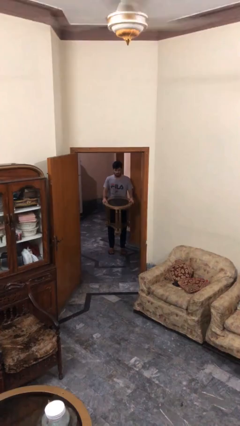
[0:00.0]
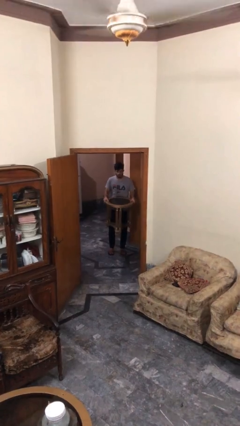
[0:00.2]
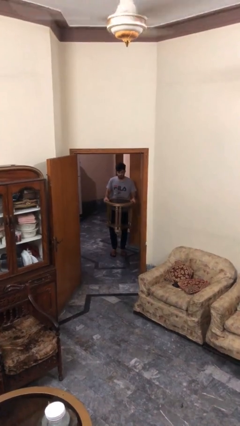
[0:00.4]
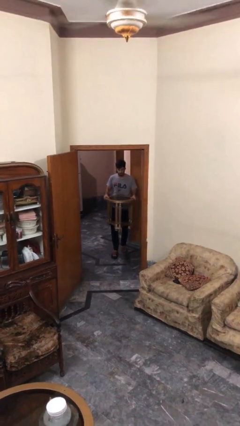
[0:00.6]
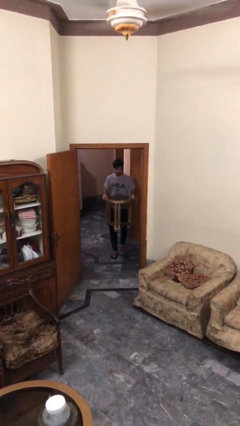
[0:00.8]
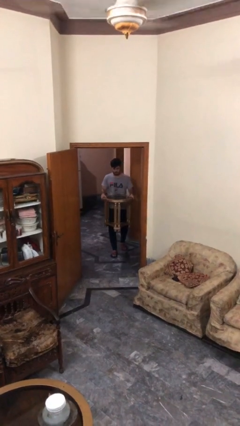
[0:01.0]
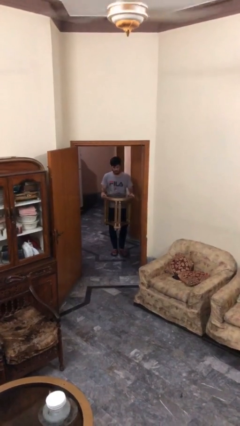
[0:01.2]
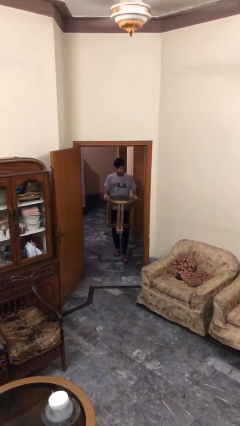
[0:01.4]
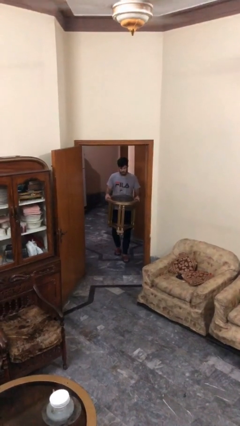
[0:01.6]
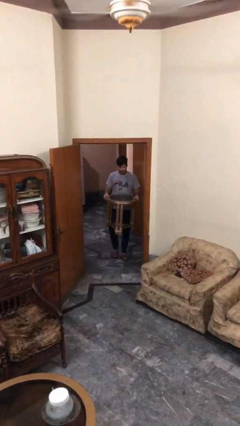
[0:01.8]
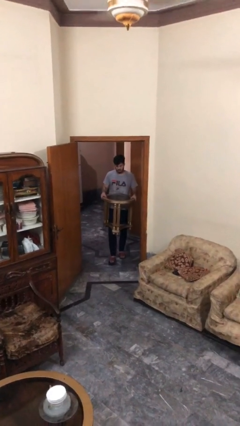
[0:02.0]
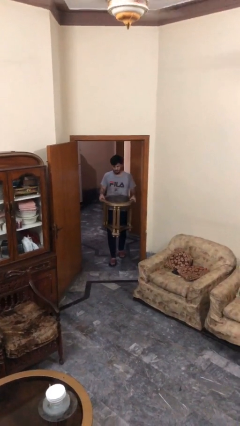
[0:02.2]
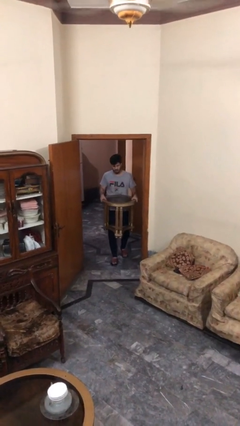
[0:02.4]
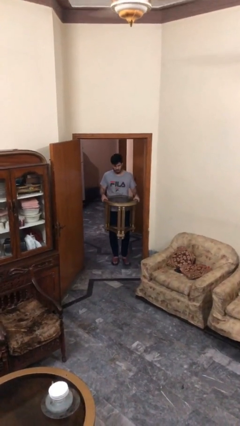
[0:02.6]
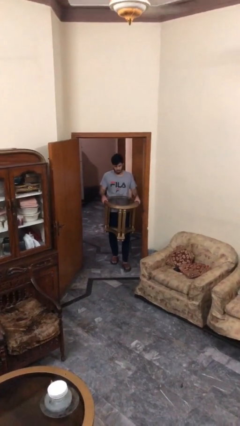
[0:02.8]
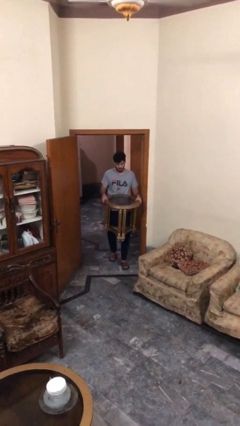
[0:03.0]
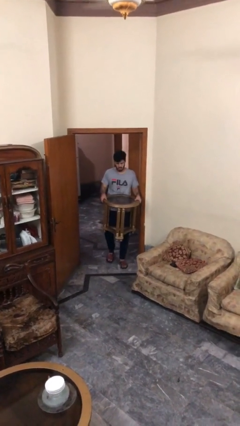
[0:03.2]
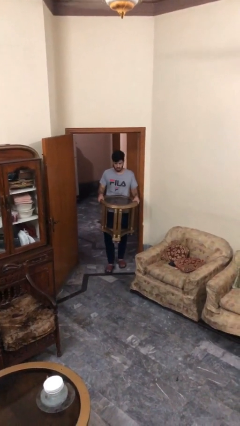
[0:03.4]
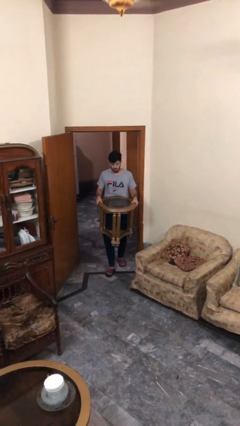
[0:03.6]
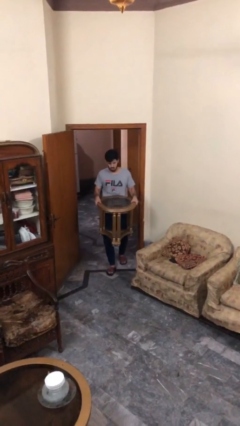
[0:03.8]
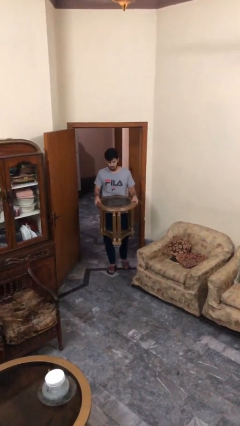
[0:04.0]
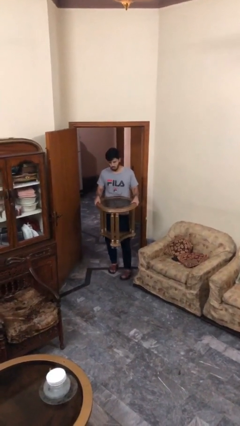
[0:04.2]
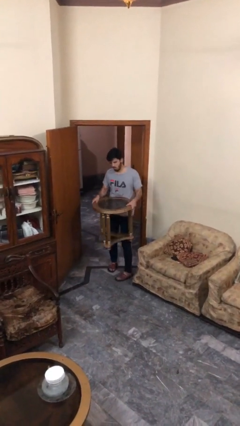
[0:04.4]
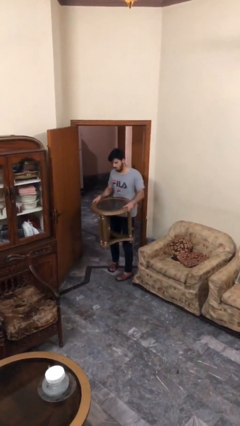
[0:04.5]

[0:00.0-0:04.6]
person carries furniture

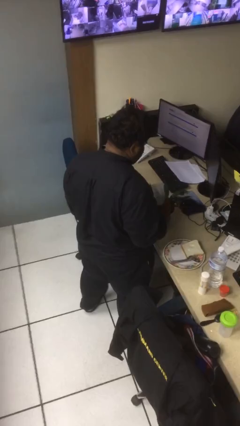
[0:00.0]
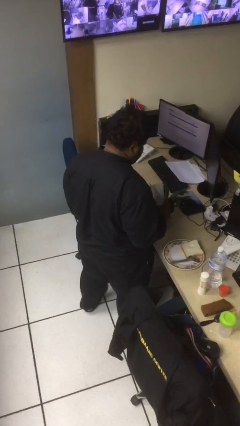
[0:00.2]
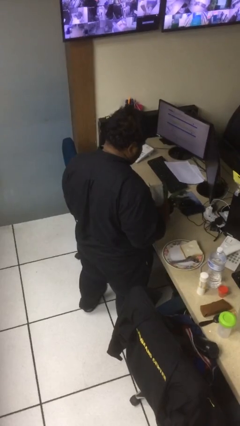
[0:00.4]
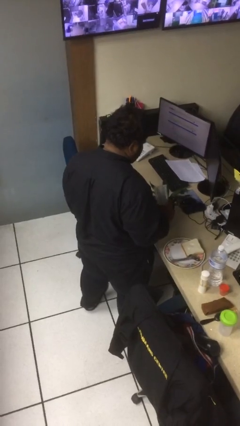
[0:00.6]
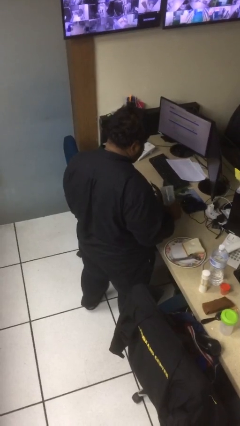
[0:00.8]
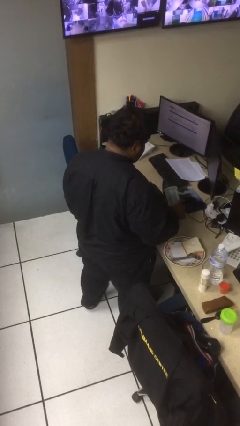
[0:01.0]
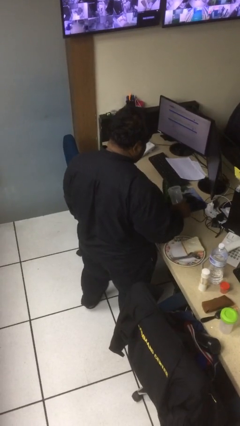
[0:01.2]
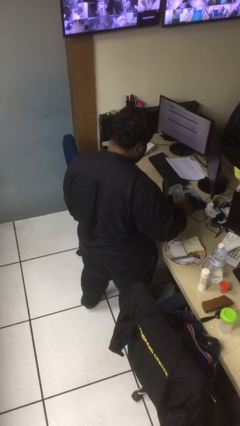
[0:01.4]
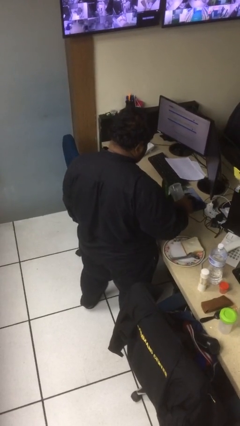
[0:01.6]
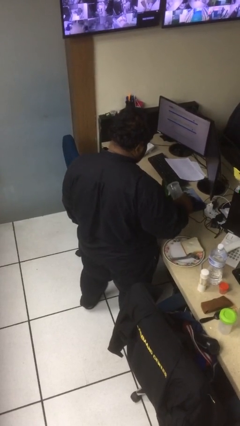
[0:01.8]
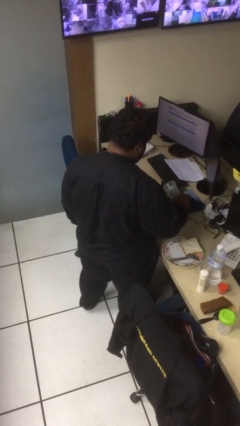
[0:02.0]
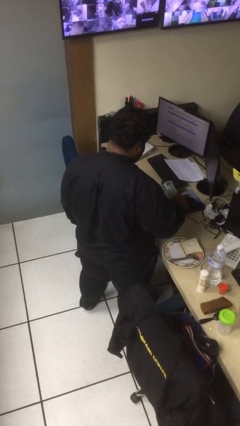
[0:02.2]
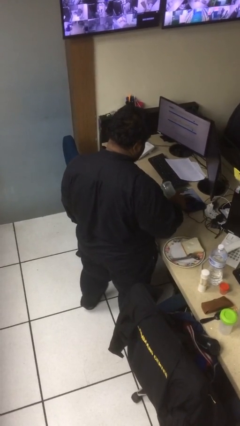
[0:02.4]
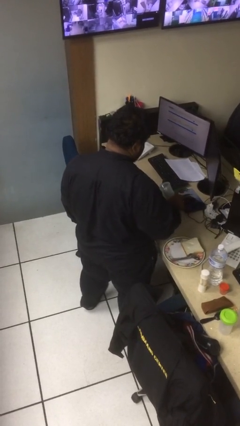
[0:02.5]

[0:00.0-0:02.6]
person waters houseplant

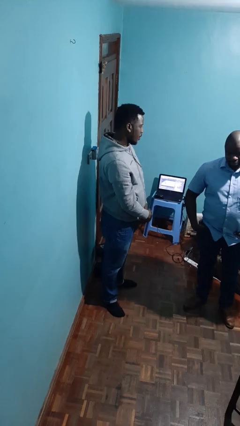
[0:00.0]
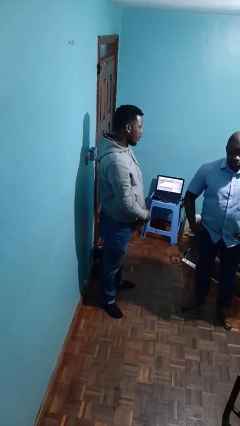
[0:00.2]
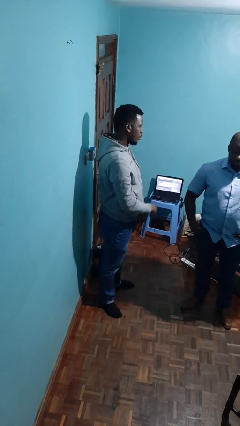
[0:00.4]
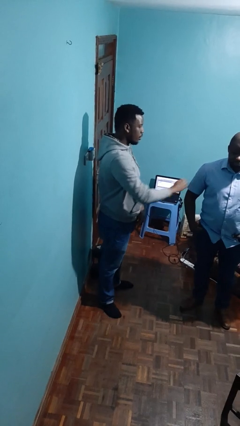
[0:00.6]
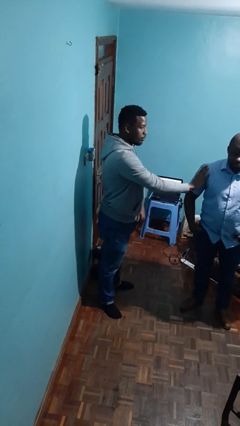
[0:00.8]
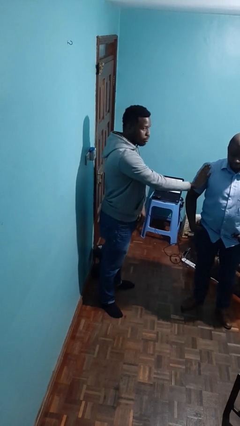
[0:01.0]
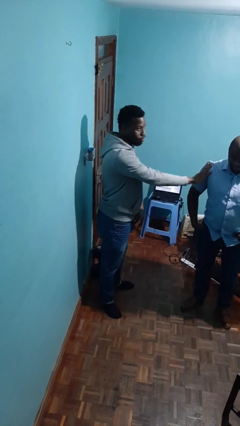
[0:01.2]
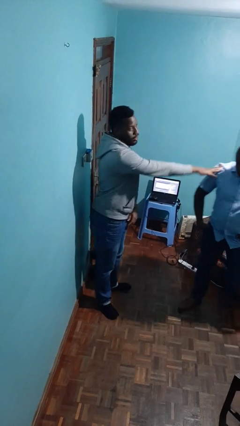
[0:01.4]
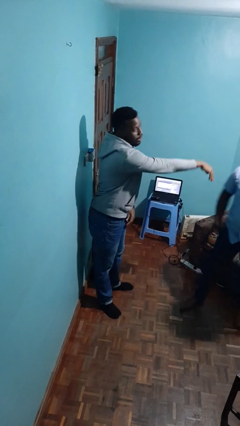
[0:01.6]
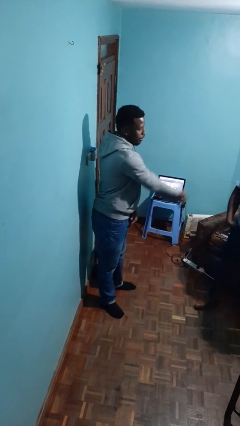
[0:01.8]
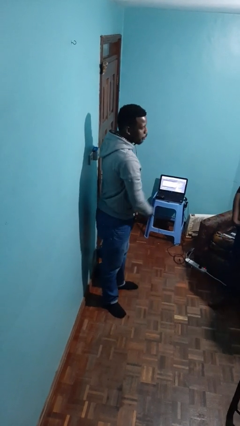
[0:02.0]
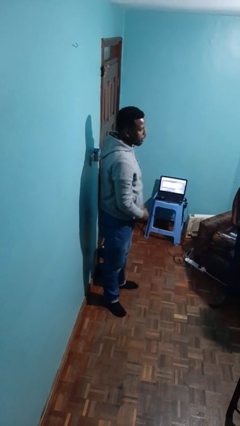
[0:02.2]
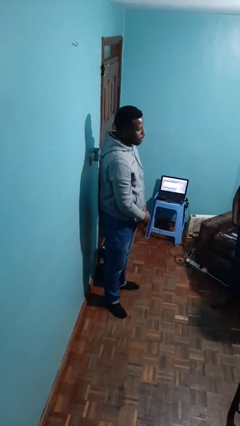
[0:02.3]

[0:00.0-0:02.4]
person shoves person

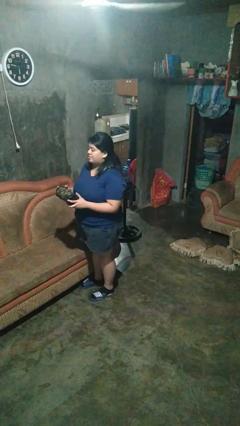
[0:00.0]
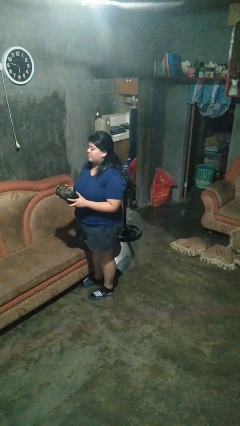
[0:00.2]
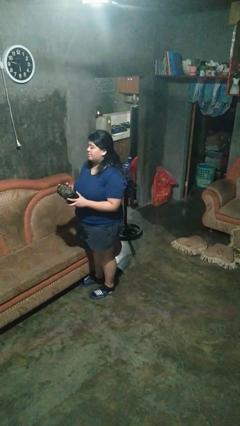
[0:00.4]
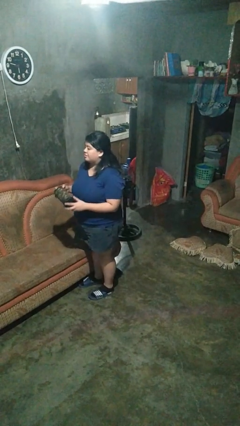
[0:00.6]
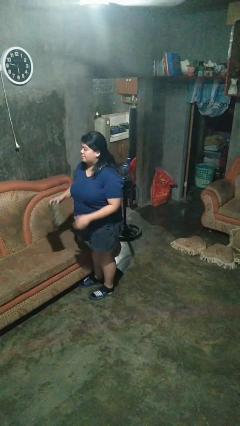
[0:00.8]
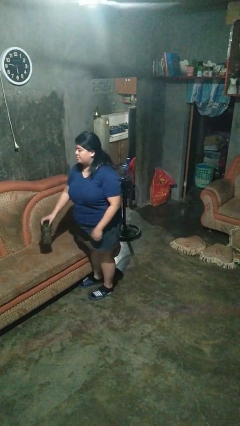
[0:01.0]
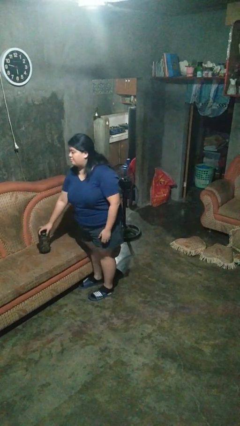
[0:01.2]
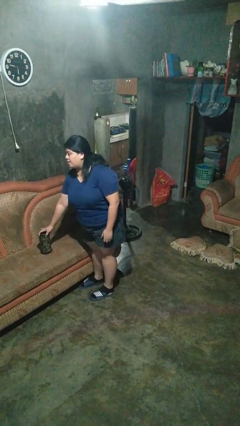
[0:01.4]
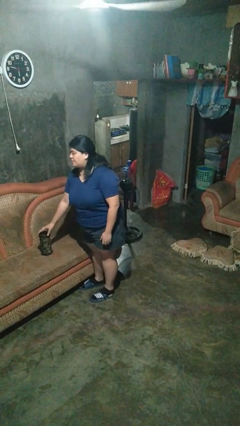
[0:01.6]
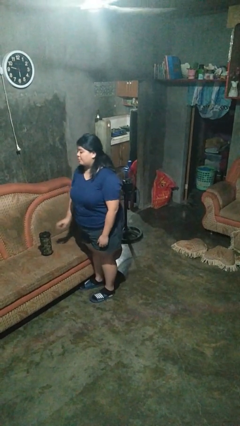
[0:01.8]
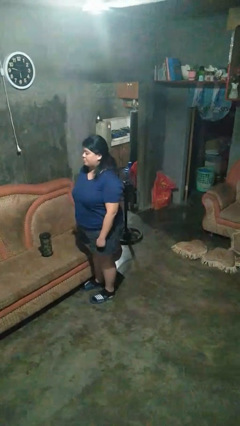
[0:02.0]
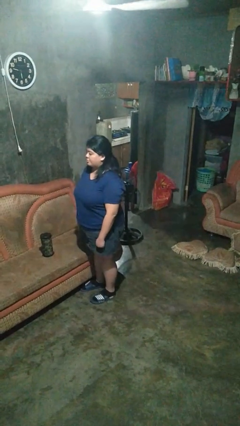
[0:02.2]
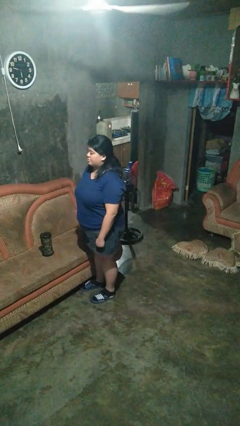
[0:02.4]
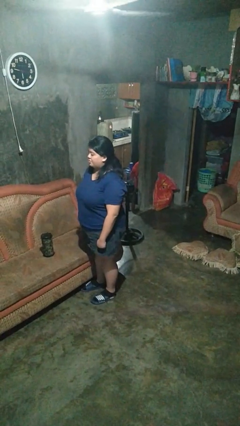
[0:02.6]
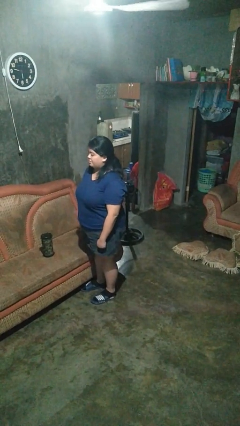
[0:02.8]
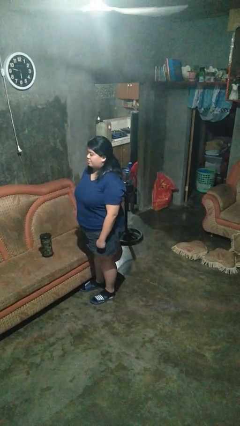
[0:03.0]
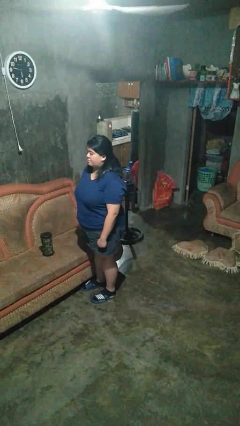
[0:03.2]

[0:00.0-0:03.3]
person puts down object on couch

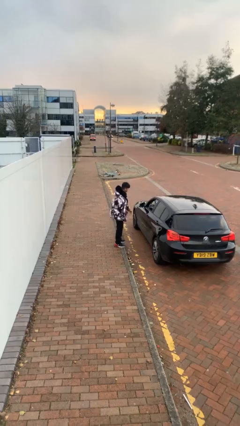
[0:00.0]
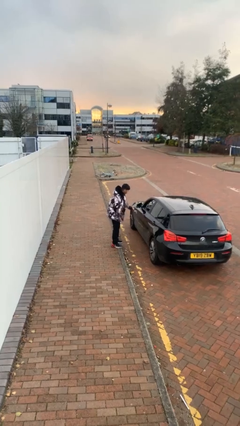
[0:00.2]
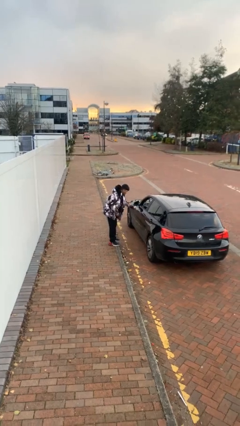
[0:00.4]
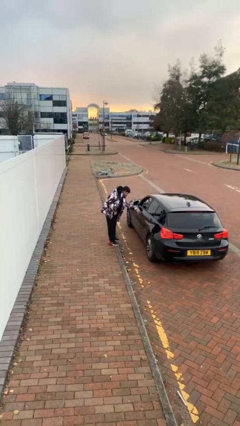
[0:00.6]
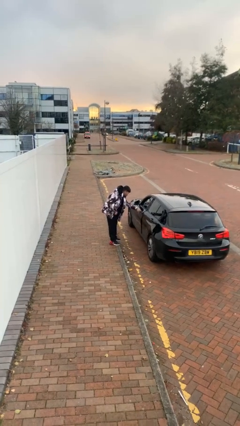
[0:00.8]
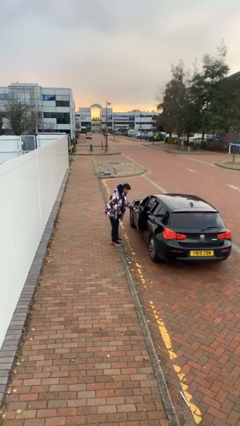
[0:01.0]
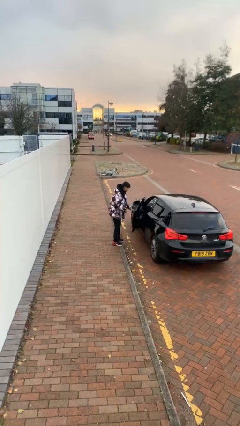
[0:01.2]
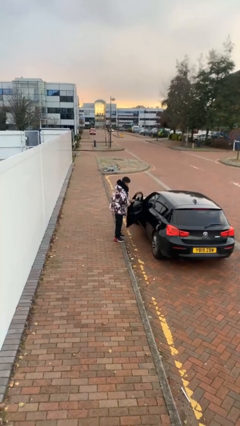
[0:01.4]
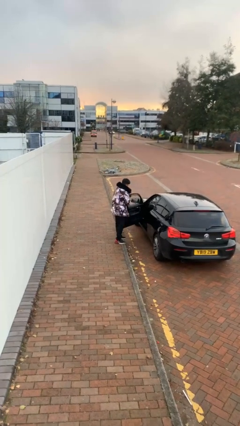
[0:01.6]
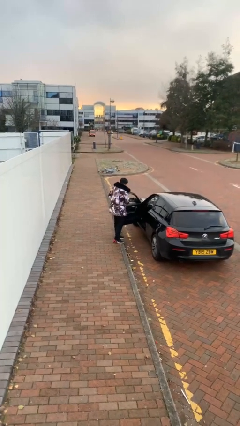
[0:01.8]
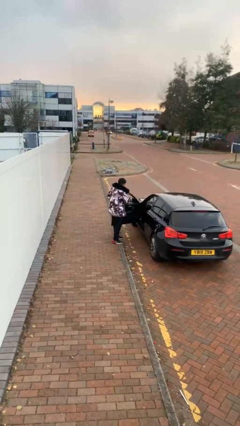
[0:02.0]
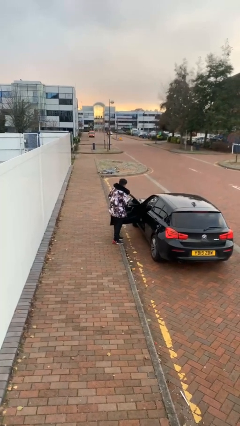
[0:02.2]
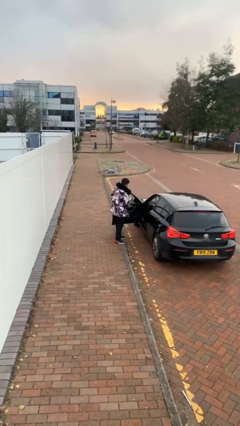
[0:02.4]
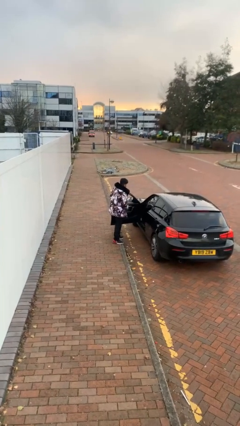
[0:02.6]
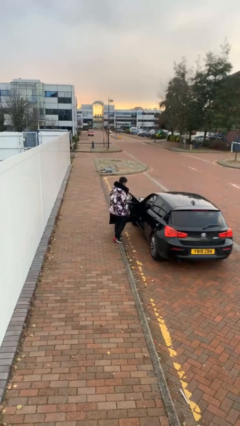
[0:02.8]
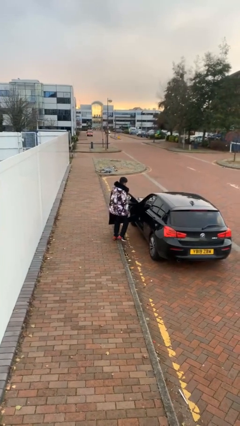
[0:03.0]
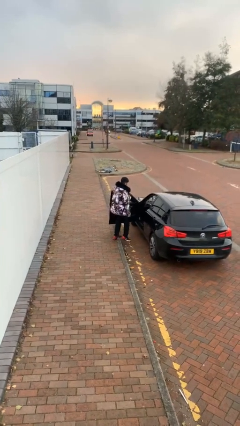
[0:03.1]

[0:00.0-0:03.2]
person opens car door

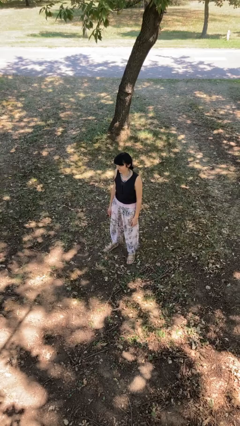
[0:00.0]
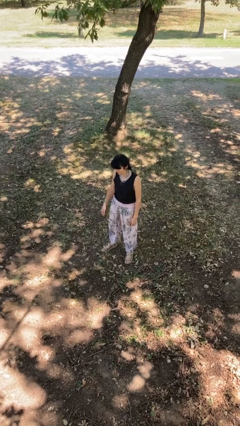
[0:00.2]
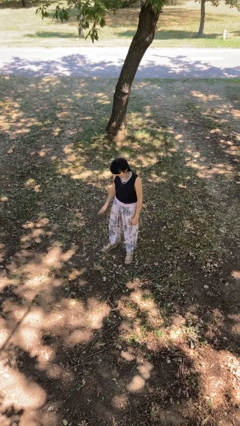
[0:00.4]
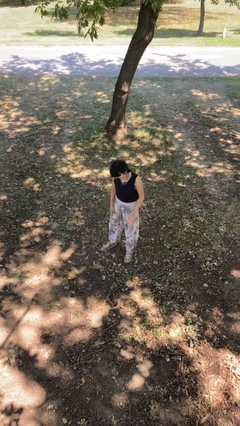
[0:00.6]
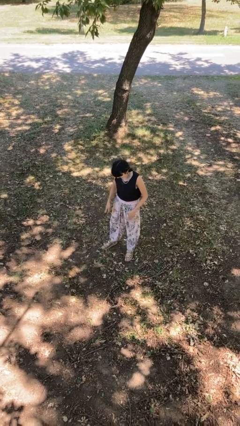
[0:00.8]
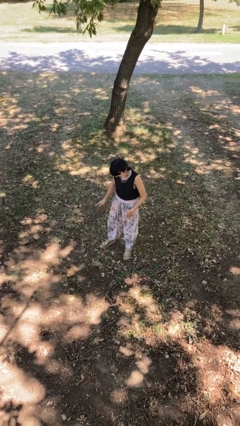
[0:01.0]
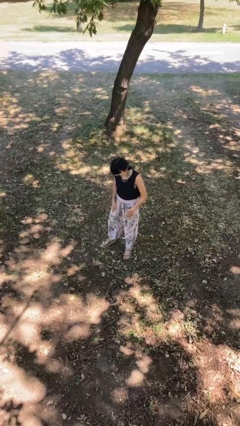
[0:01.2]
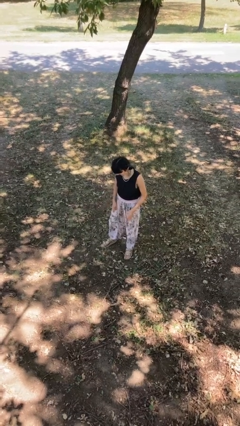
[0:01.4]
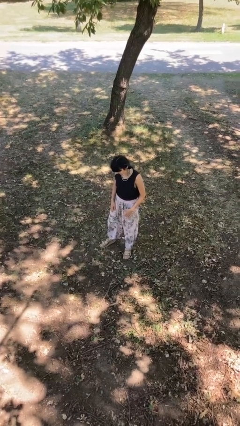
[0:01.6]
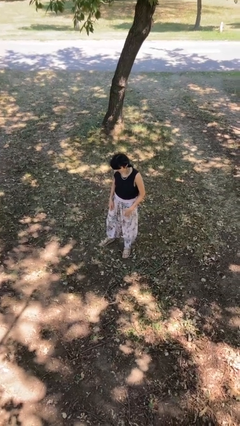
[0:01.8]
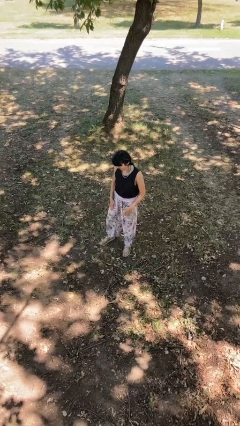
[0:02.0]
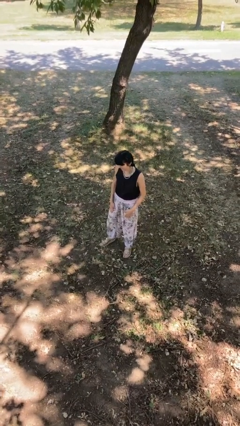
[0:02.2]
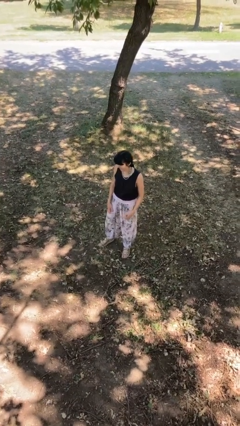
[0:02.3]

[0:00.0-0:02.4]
person slaps hands on thighs
